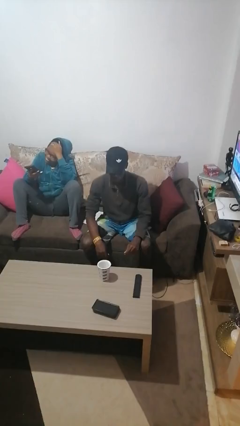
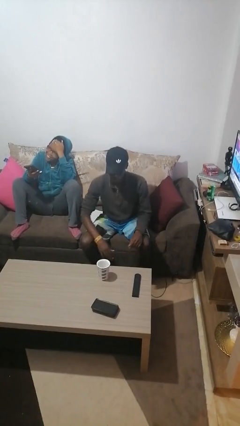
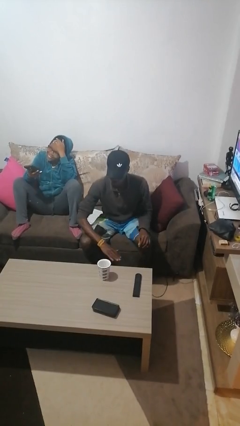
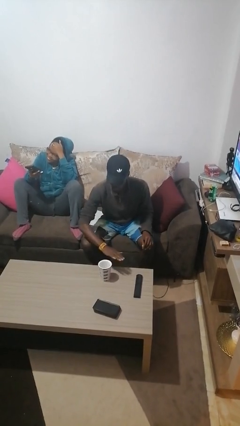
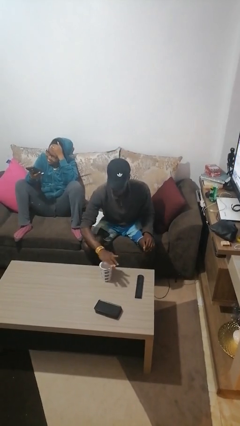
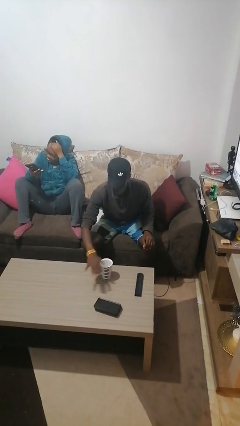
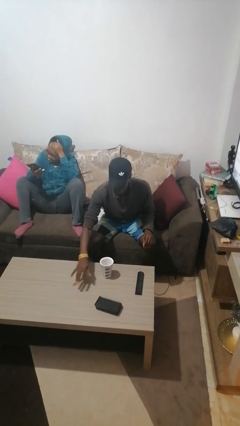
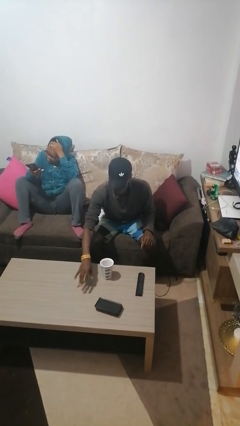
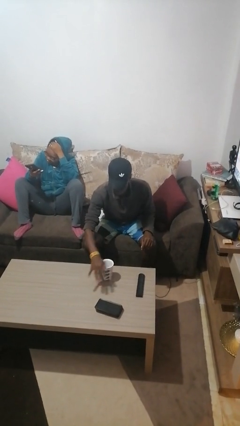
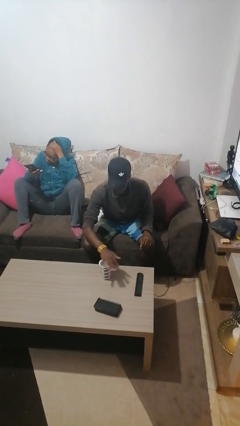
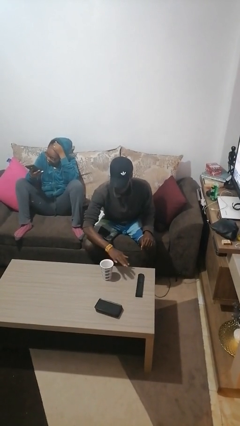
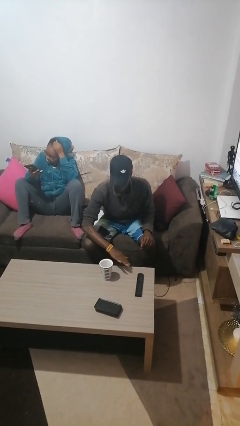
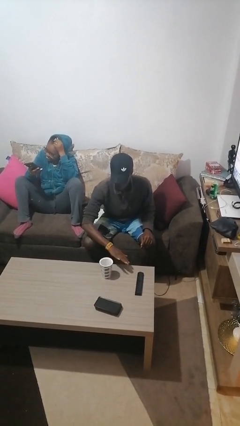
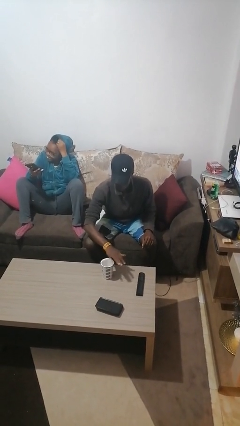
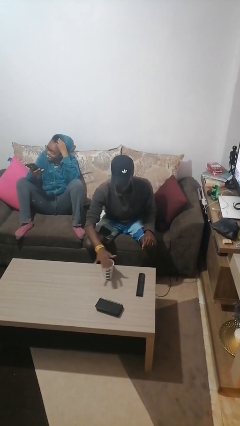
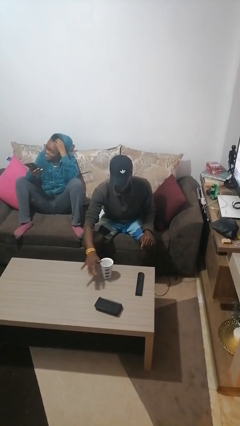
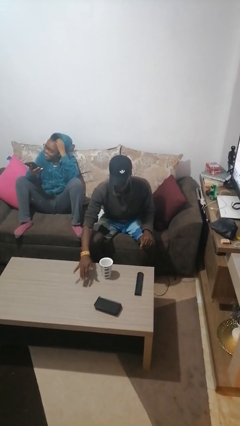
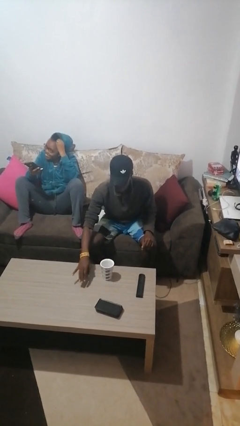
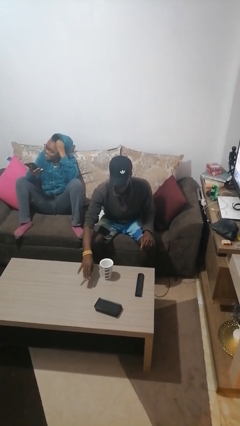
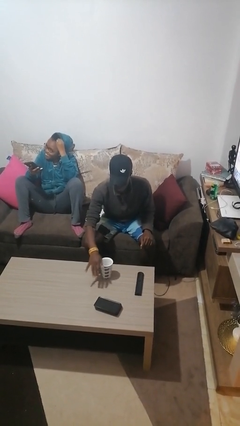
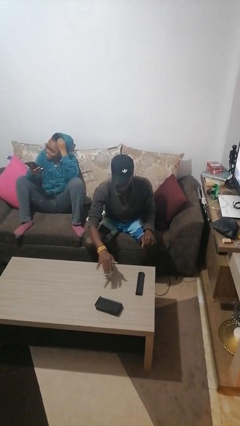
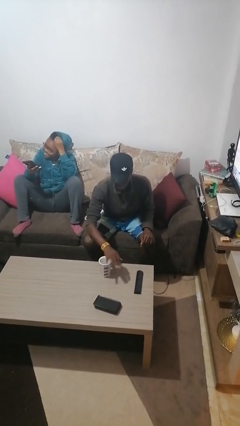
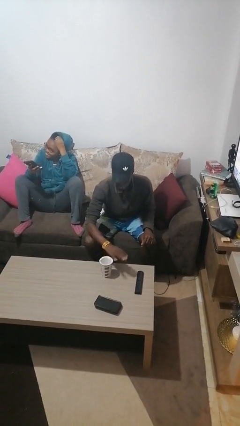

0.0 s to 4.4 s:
person waves hand over object

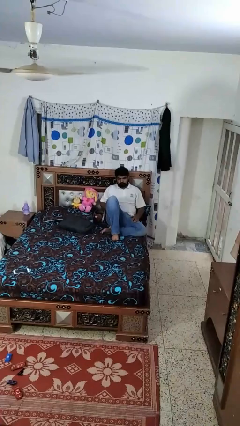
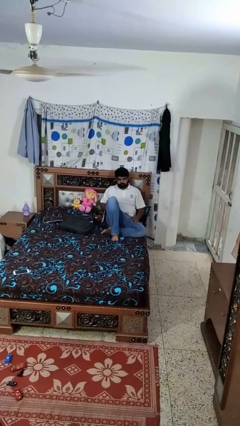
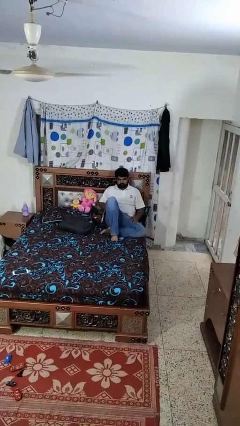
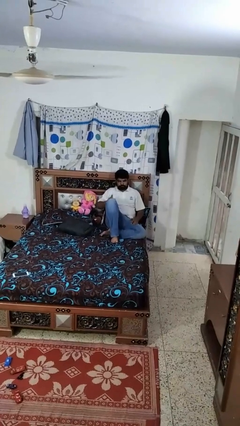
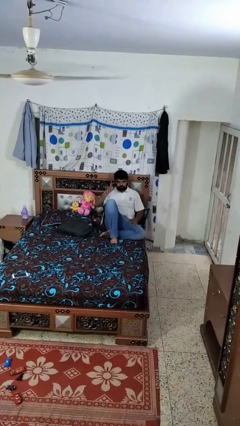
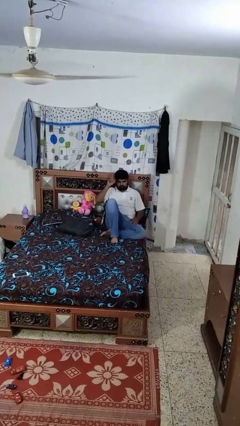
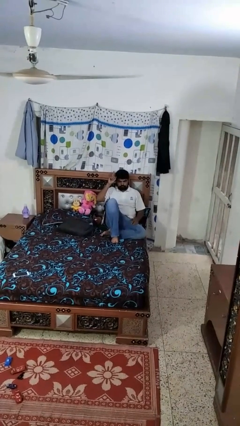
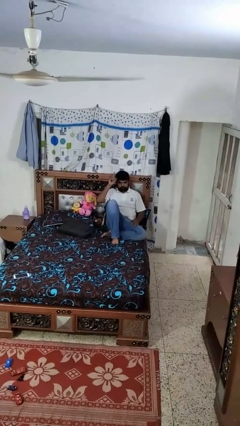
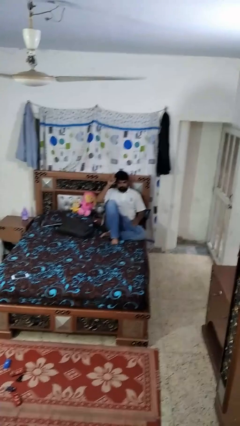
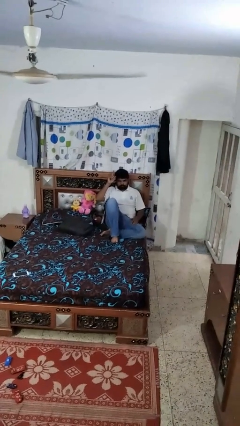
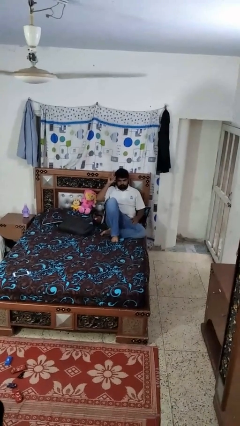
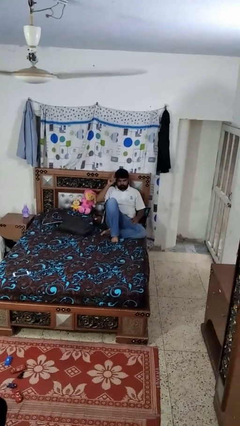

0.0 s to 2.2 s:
person gestures raise hand

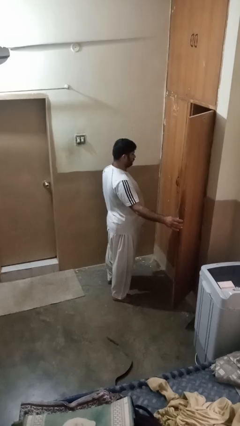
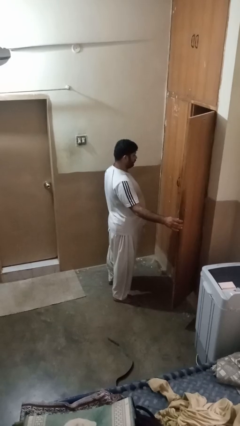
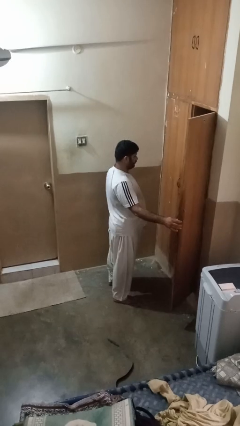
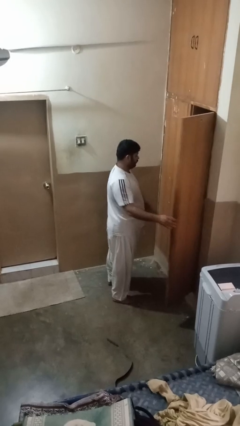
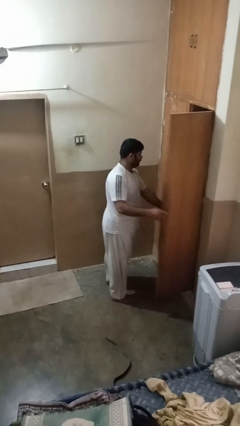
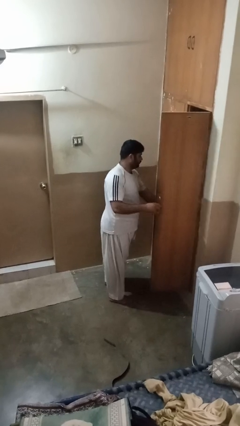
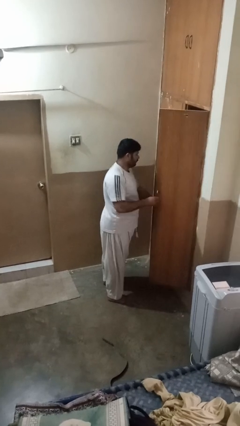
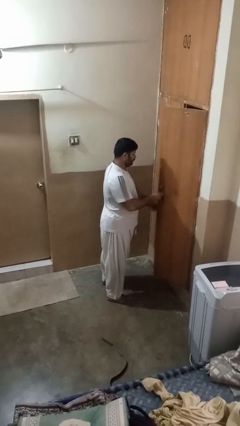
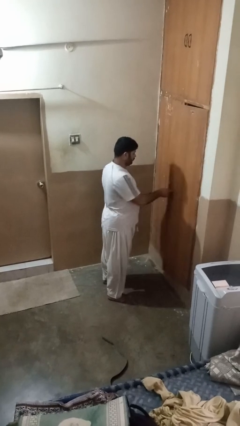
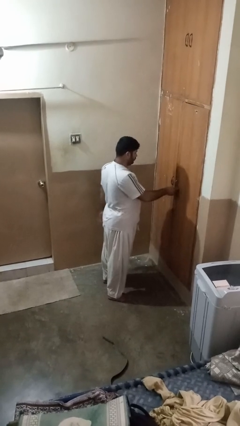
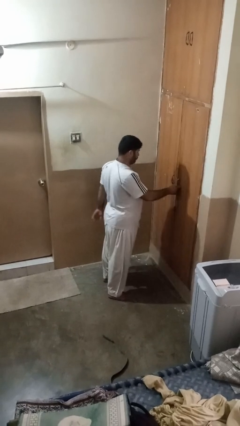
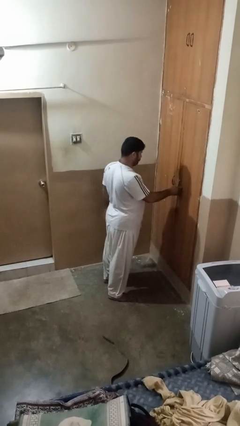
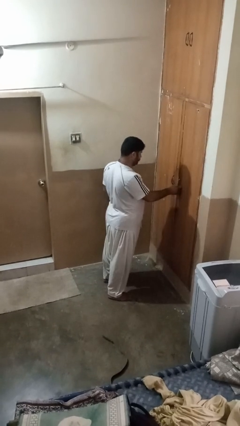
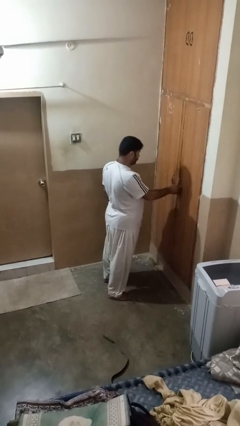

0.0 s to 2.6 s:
person closes closet door

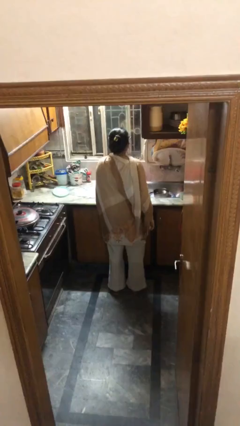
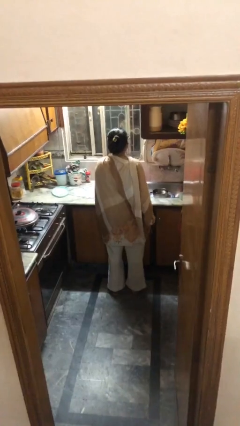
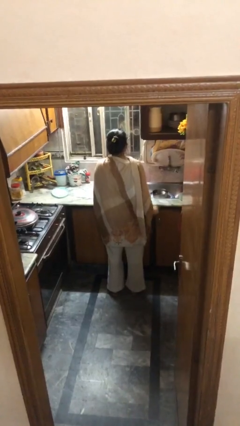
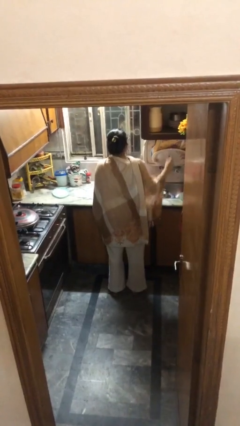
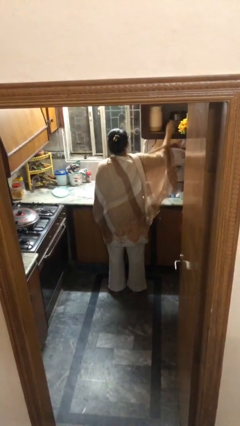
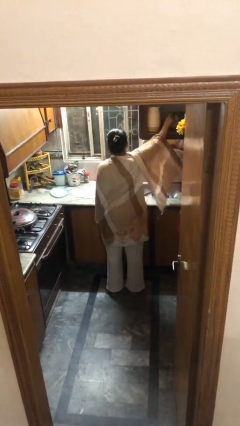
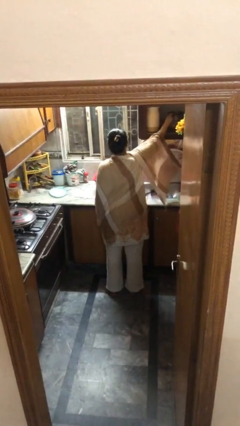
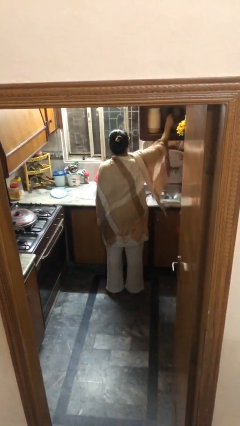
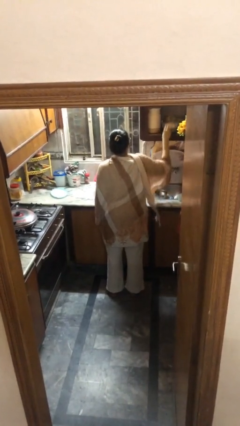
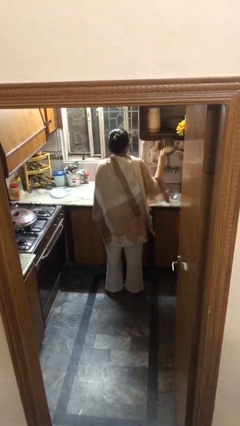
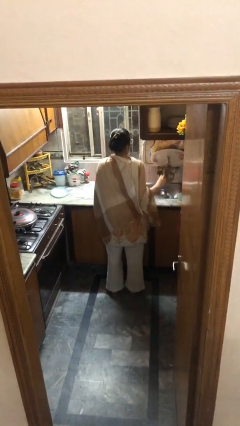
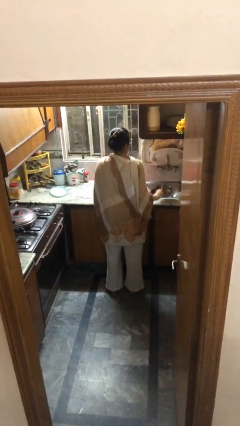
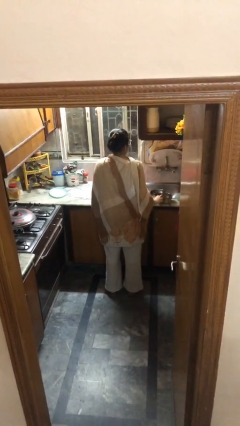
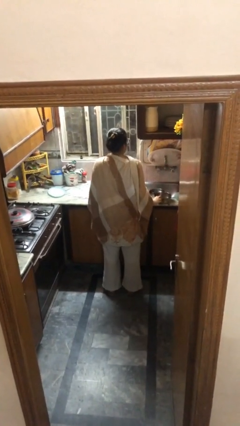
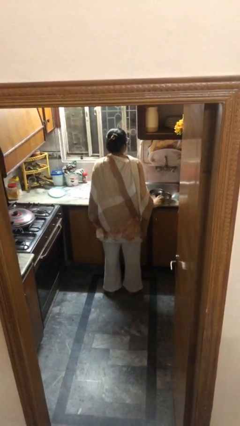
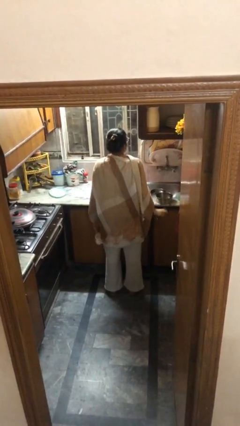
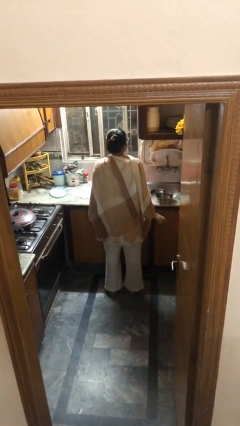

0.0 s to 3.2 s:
person takes object from cabinet

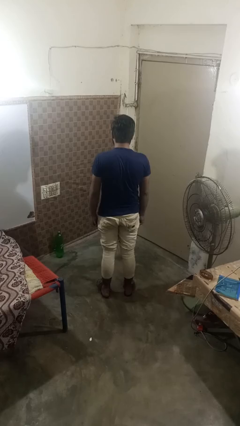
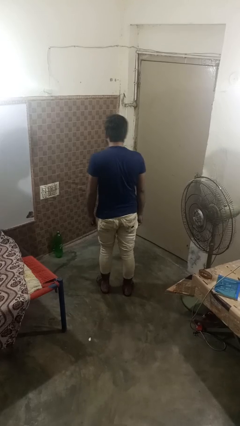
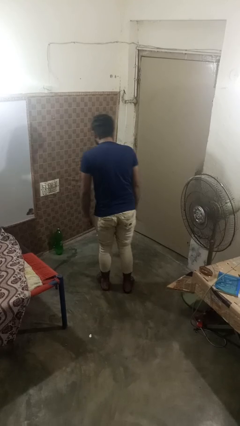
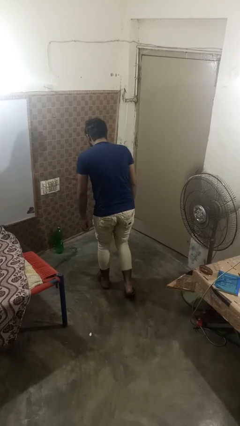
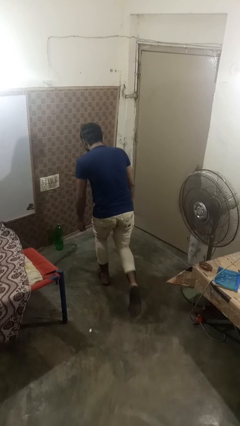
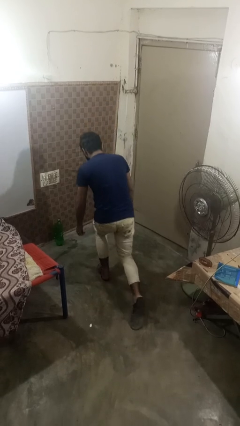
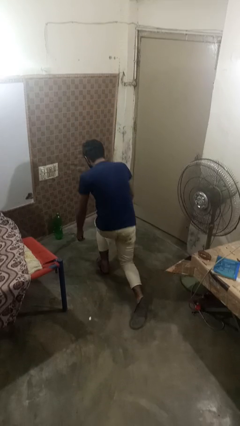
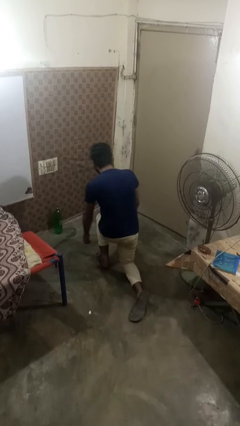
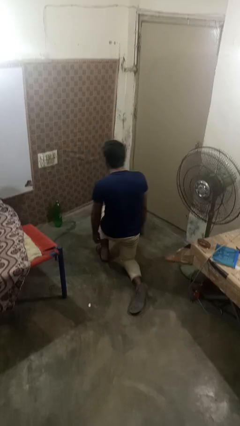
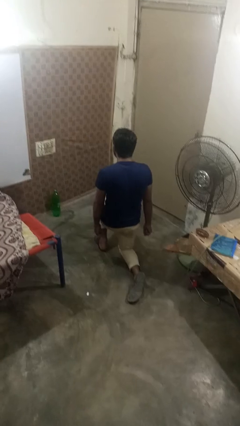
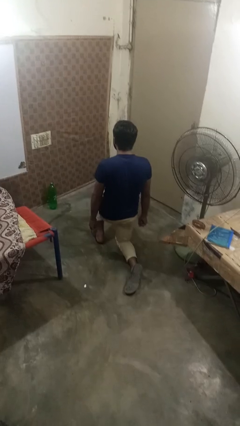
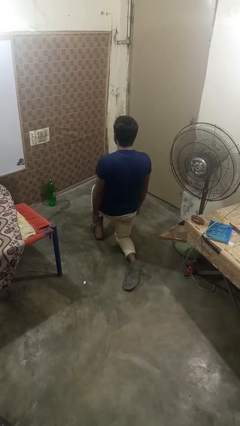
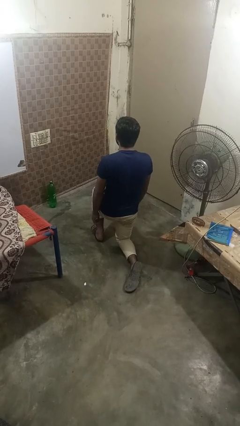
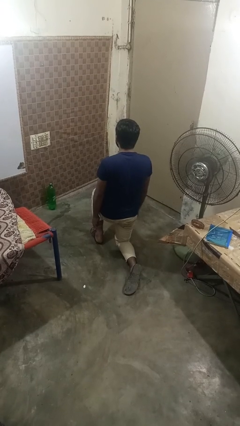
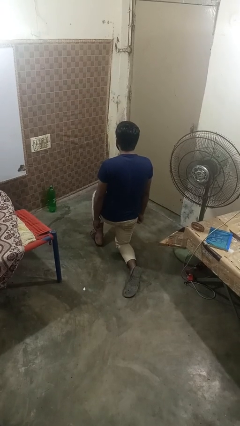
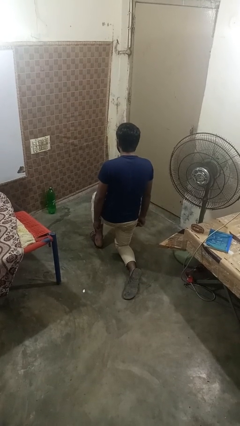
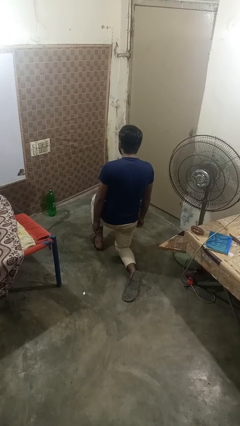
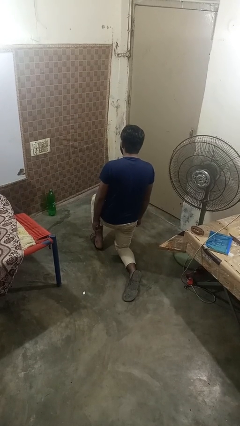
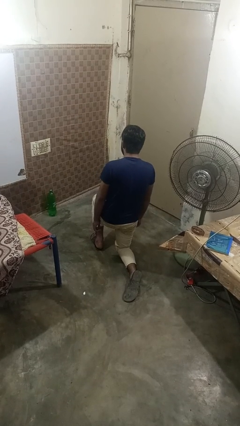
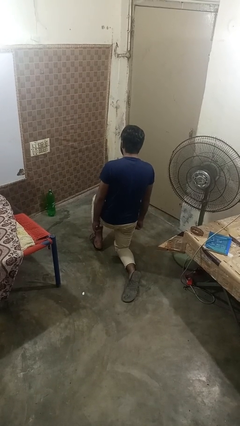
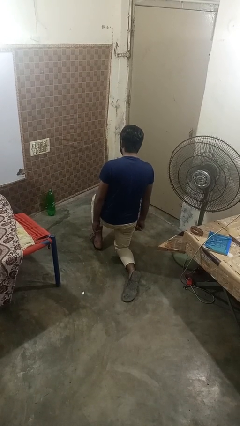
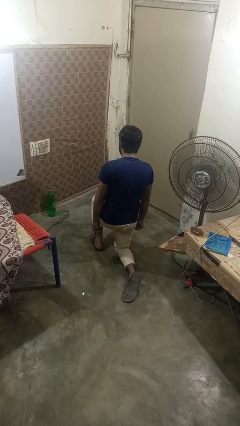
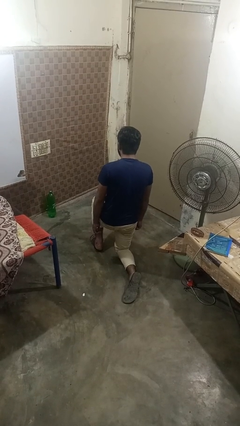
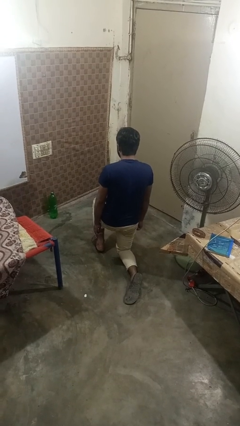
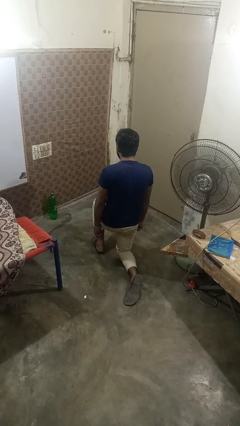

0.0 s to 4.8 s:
person kneels

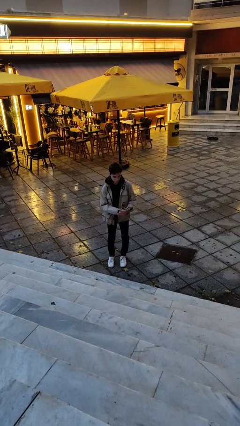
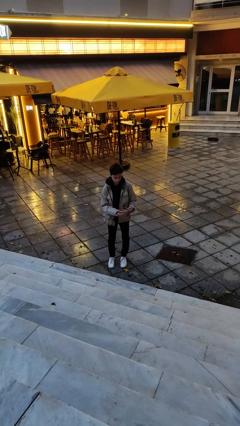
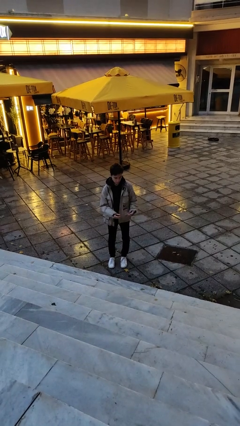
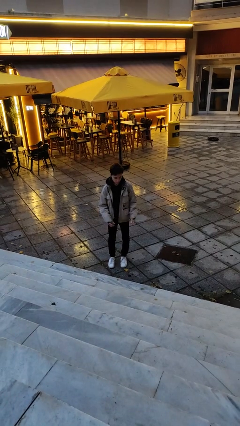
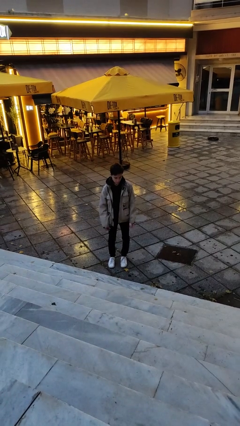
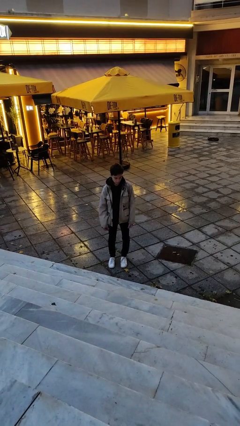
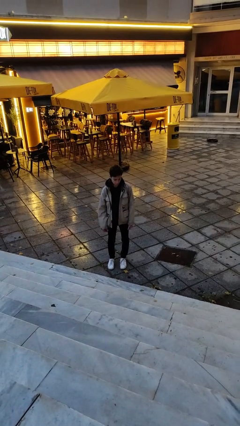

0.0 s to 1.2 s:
person takes off ring
